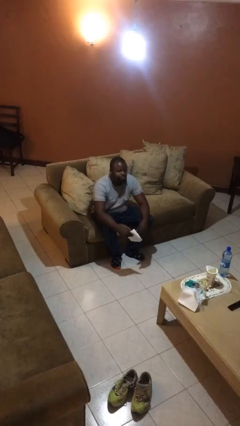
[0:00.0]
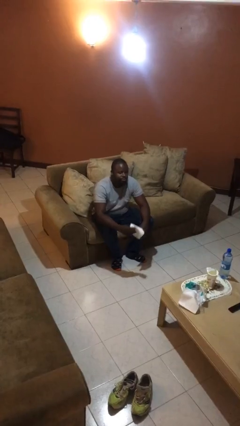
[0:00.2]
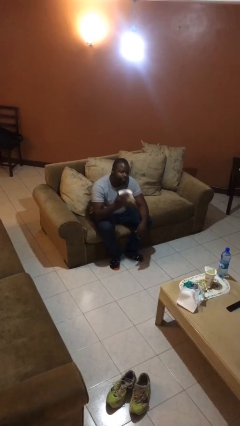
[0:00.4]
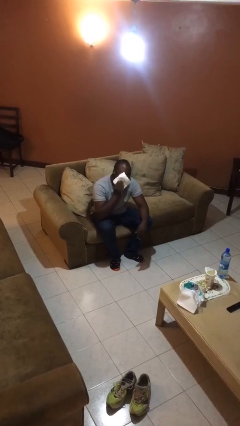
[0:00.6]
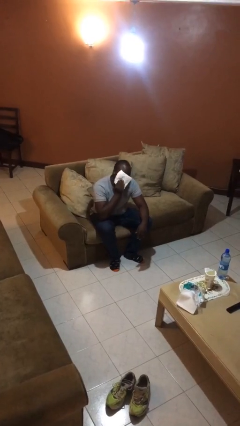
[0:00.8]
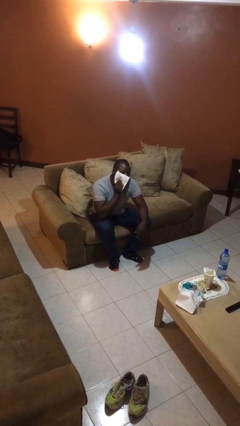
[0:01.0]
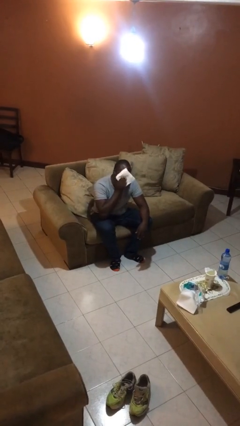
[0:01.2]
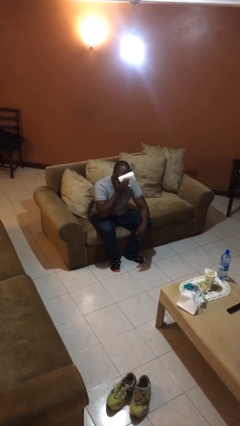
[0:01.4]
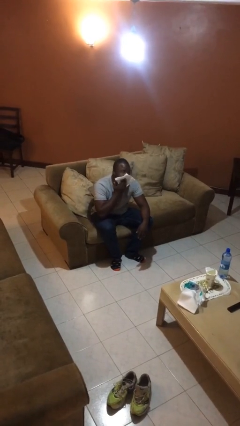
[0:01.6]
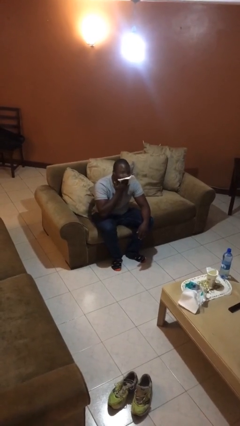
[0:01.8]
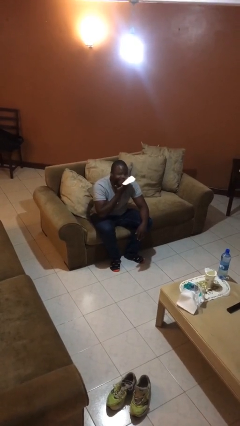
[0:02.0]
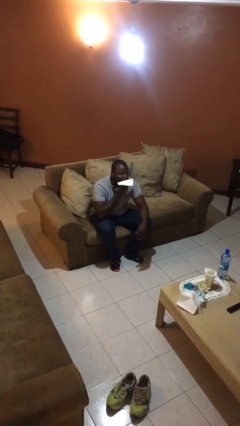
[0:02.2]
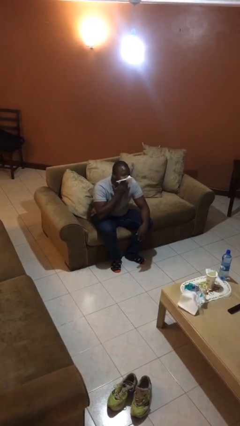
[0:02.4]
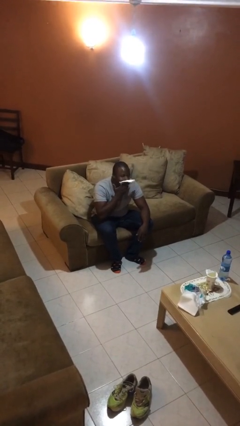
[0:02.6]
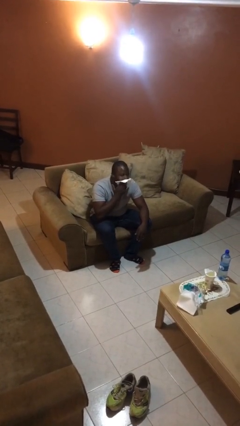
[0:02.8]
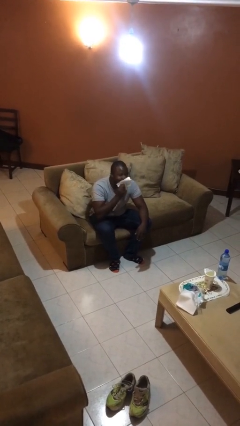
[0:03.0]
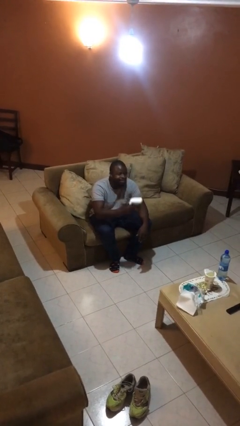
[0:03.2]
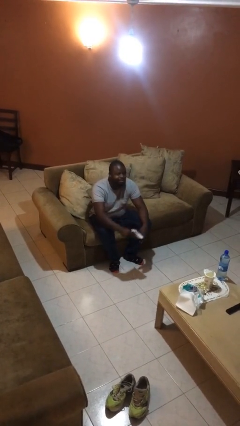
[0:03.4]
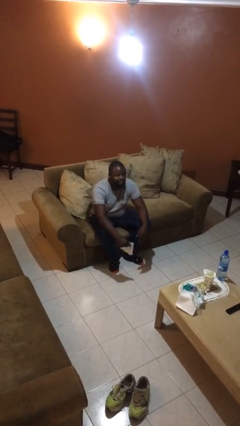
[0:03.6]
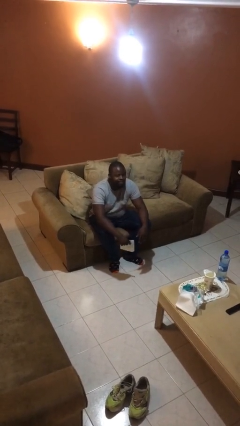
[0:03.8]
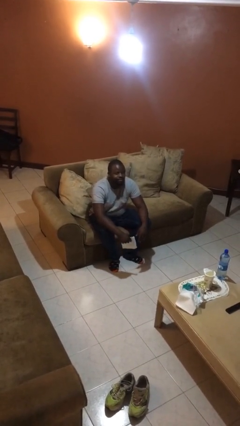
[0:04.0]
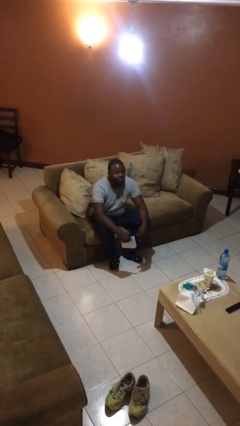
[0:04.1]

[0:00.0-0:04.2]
person wipes mouth with napkin

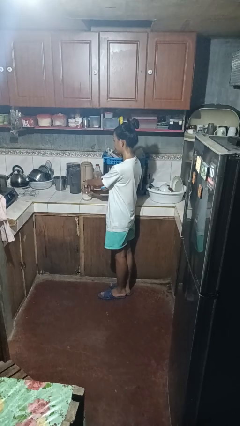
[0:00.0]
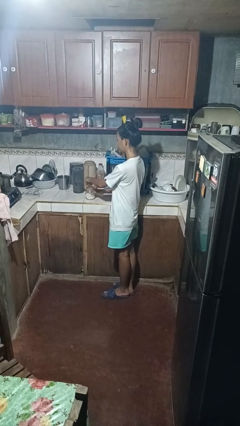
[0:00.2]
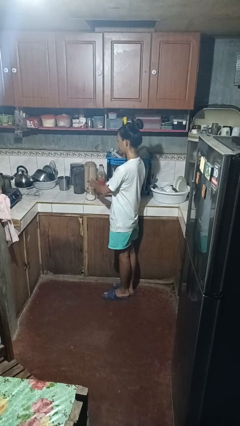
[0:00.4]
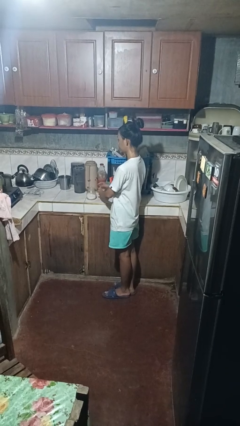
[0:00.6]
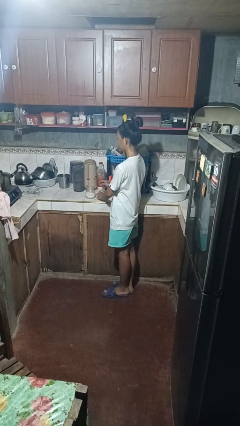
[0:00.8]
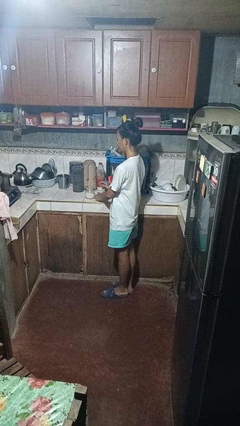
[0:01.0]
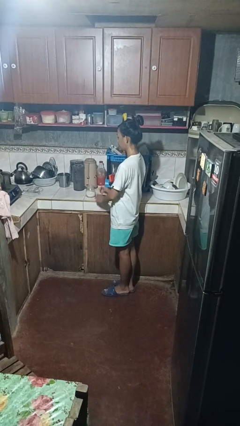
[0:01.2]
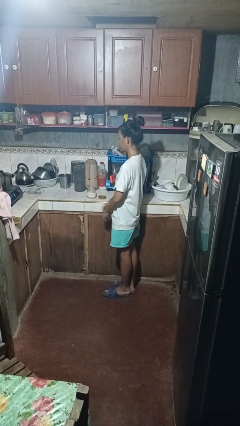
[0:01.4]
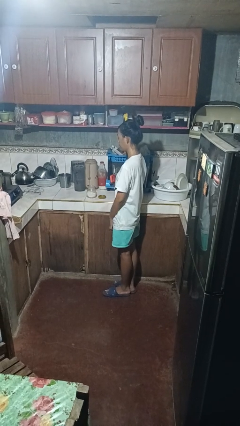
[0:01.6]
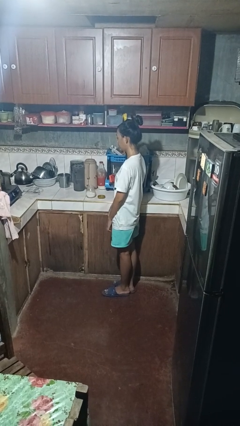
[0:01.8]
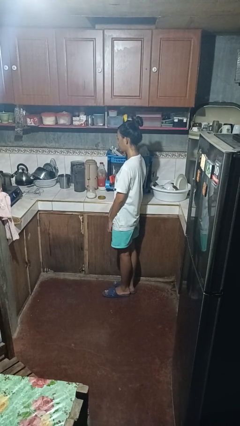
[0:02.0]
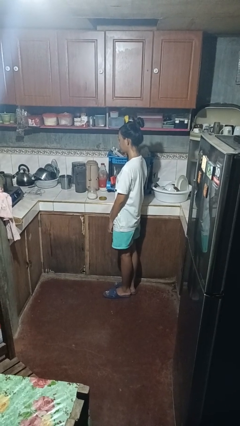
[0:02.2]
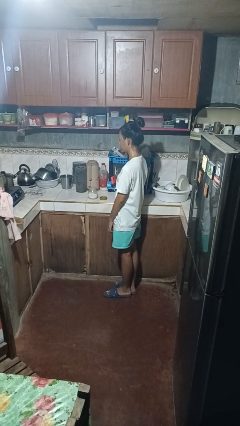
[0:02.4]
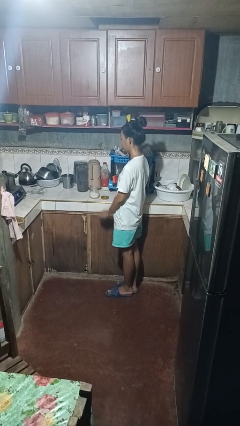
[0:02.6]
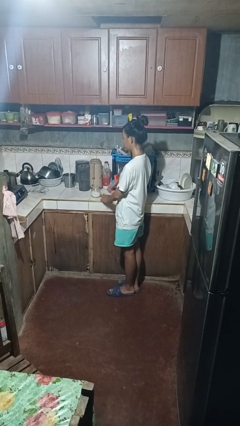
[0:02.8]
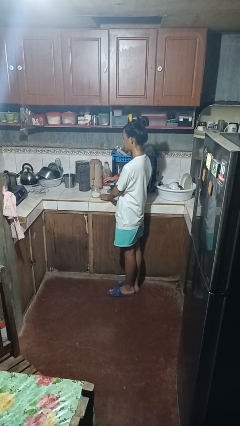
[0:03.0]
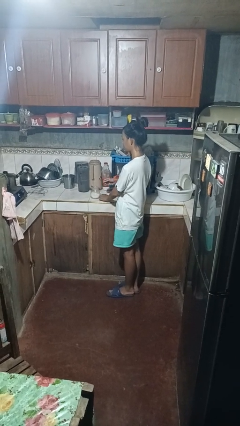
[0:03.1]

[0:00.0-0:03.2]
person unscrews lid from bottle

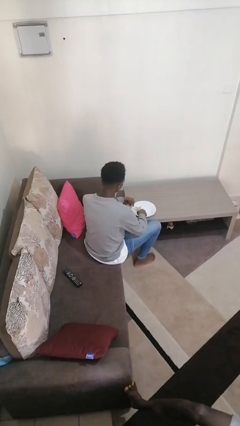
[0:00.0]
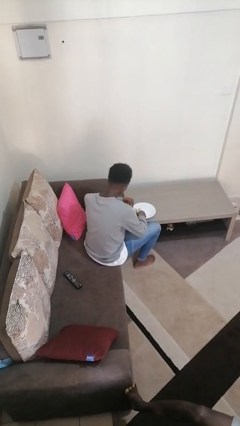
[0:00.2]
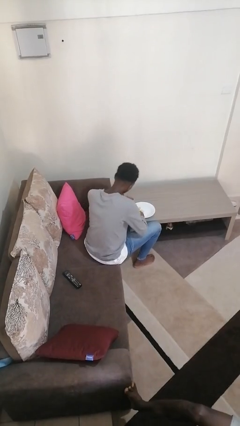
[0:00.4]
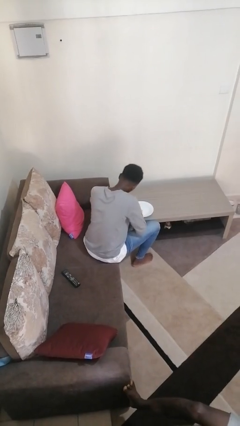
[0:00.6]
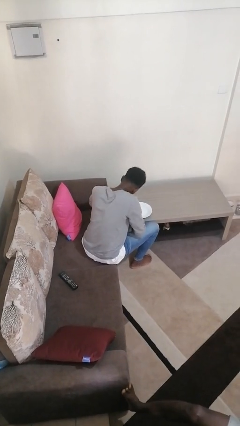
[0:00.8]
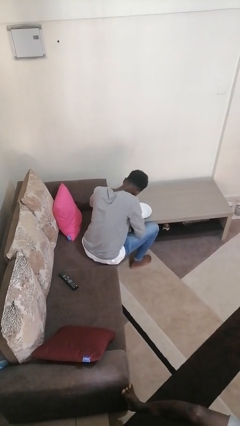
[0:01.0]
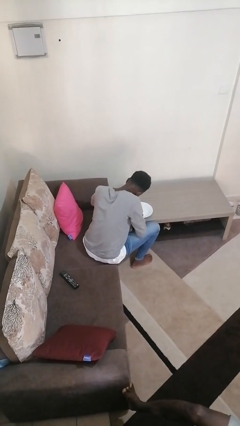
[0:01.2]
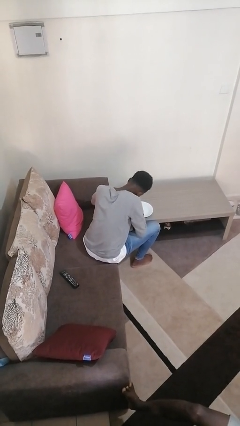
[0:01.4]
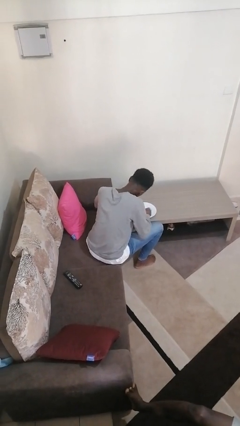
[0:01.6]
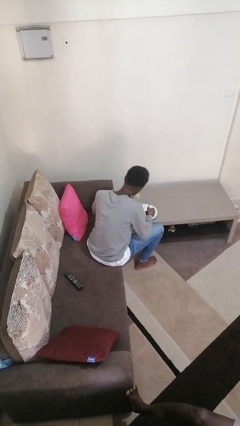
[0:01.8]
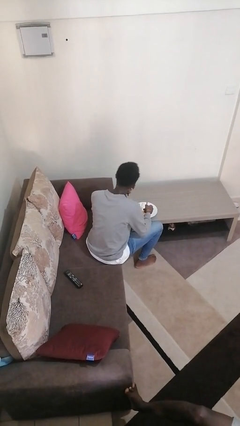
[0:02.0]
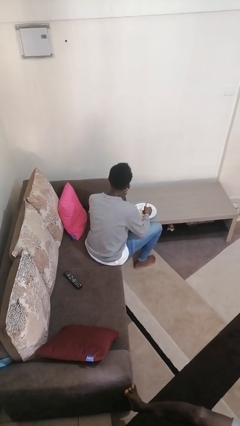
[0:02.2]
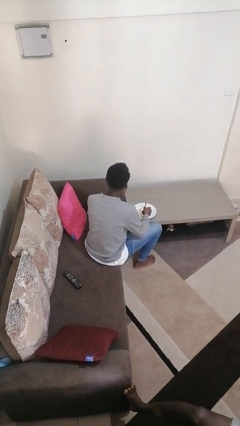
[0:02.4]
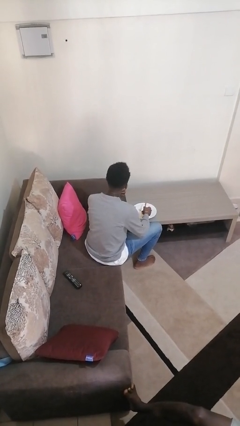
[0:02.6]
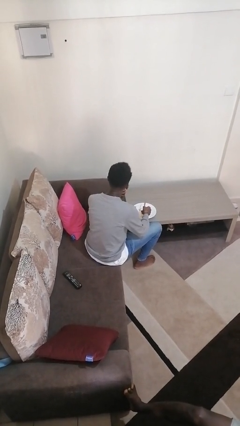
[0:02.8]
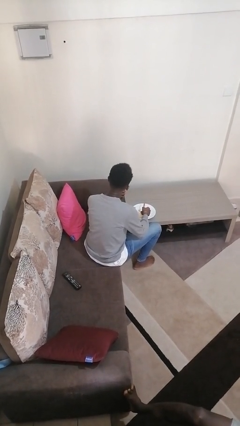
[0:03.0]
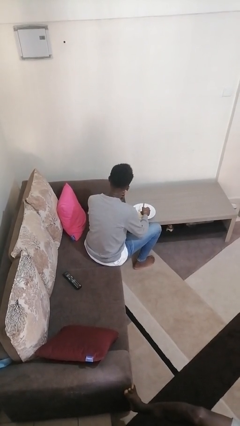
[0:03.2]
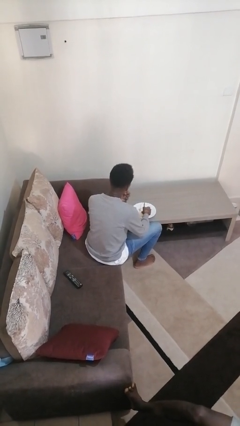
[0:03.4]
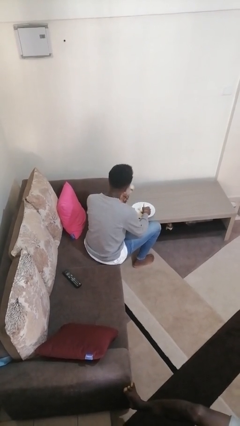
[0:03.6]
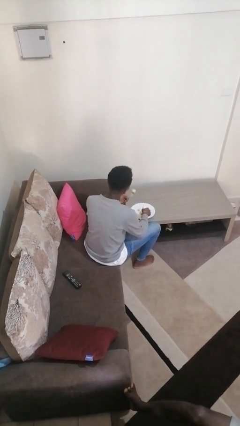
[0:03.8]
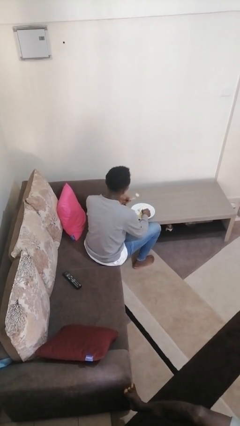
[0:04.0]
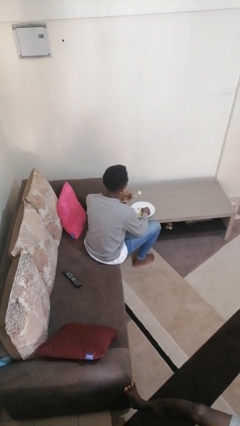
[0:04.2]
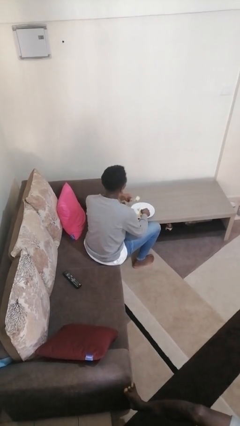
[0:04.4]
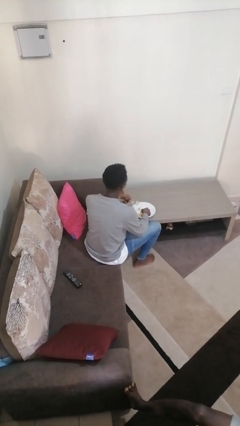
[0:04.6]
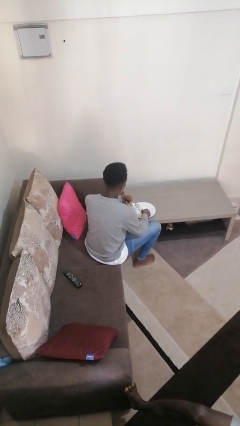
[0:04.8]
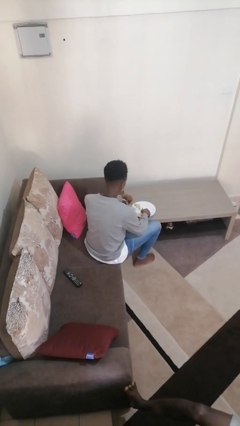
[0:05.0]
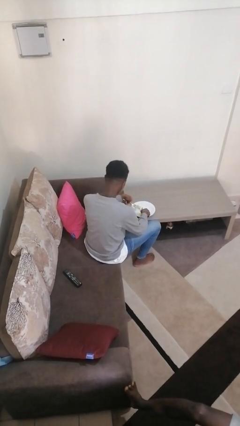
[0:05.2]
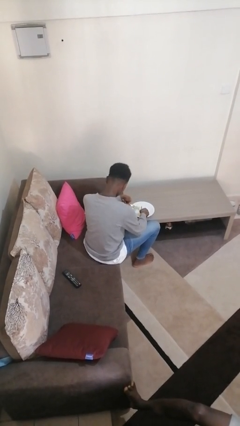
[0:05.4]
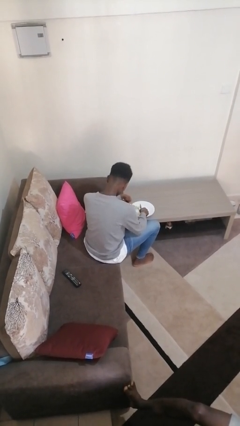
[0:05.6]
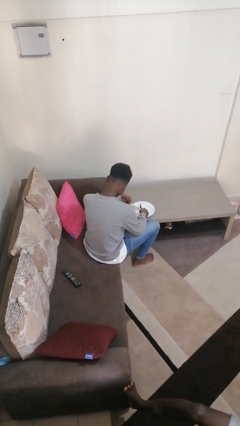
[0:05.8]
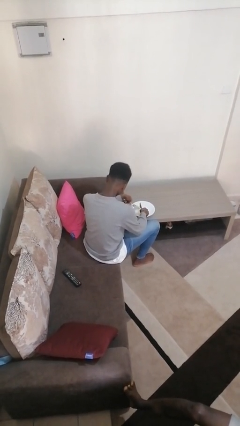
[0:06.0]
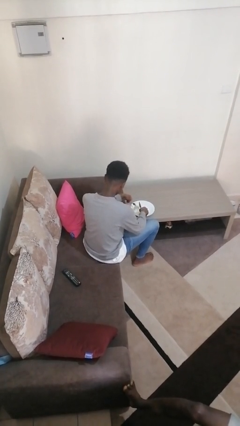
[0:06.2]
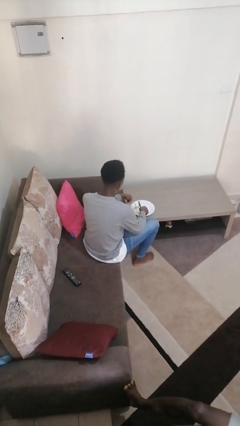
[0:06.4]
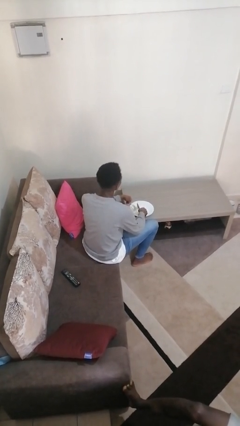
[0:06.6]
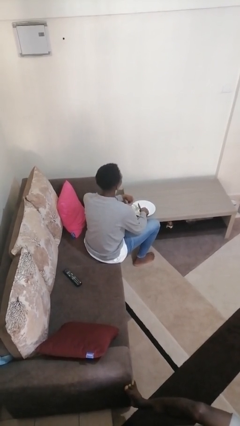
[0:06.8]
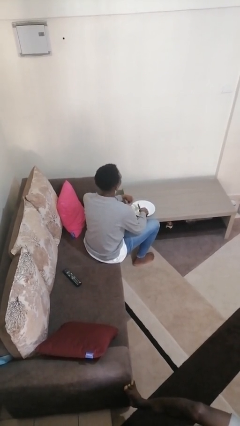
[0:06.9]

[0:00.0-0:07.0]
person eats with utensil

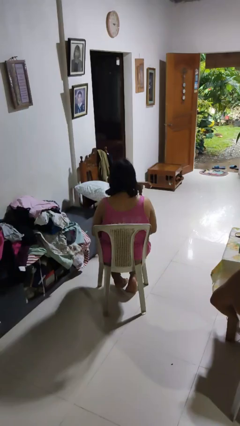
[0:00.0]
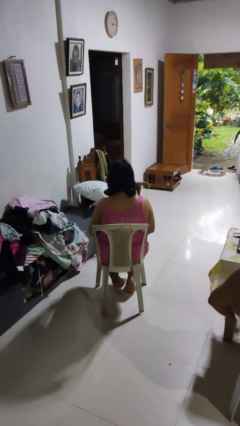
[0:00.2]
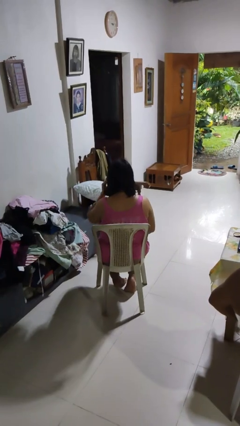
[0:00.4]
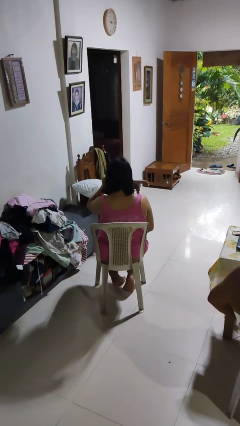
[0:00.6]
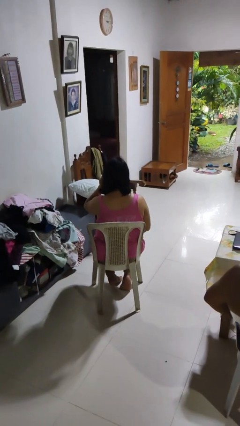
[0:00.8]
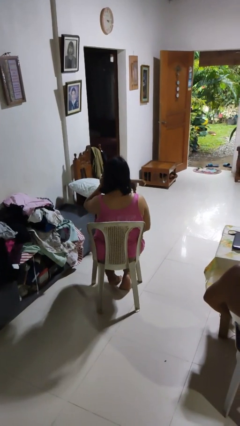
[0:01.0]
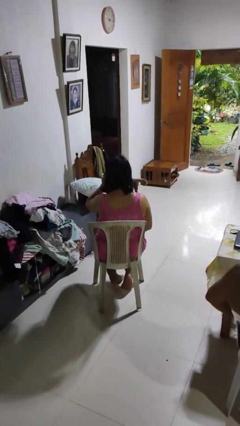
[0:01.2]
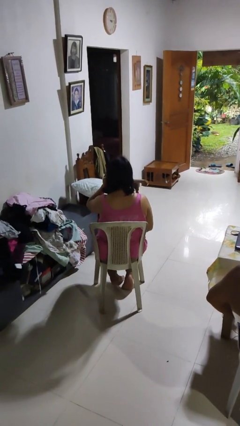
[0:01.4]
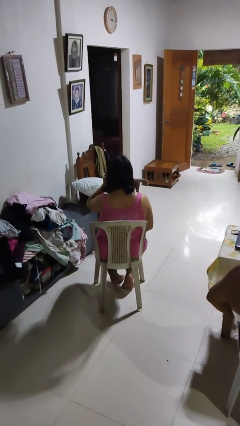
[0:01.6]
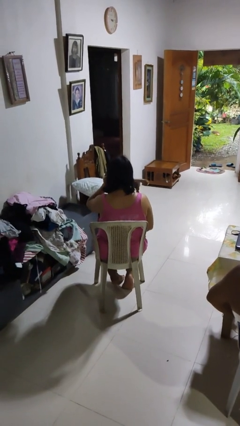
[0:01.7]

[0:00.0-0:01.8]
person touches earlobe

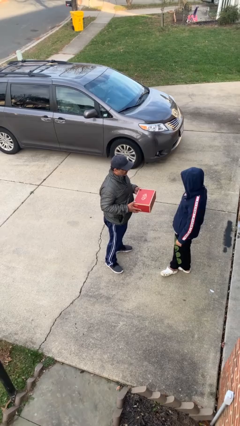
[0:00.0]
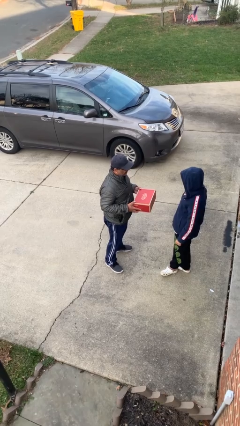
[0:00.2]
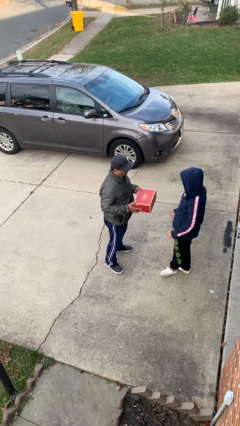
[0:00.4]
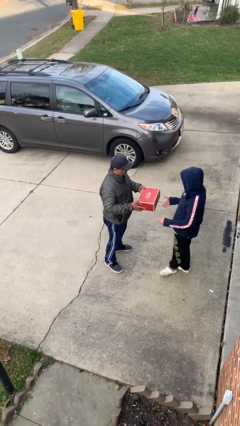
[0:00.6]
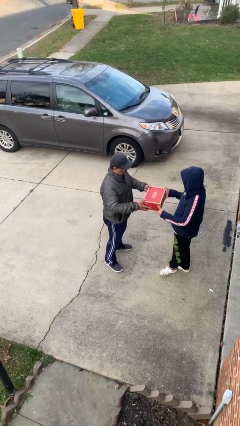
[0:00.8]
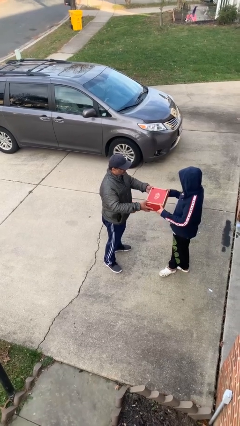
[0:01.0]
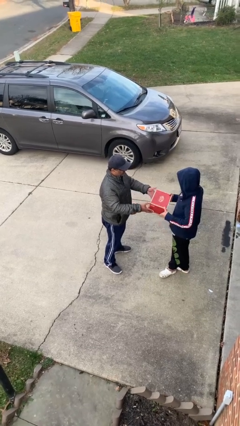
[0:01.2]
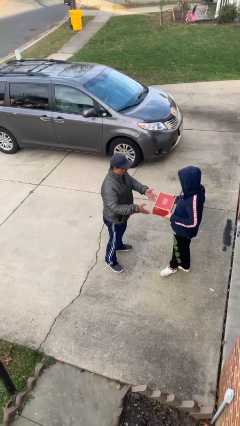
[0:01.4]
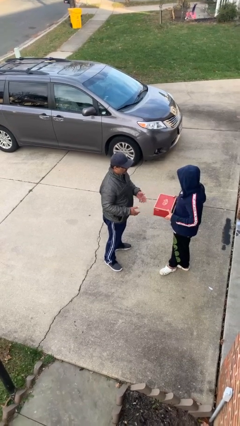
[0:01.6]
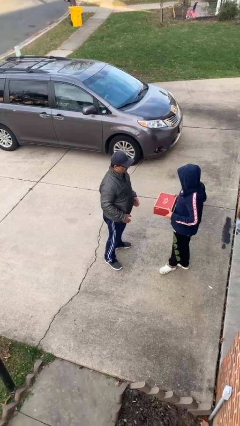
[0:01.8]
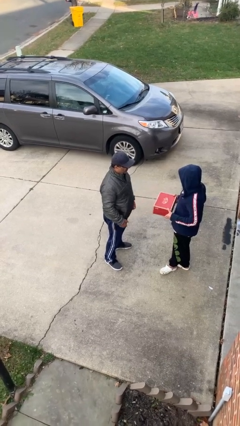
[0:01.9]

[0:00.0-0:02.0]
person transfers object to person
